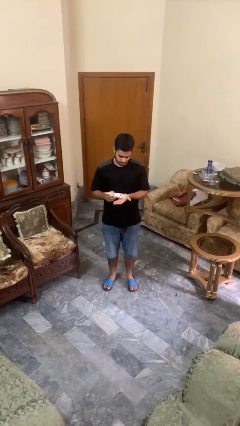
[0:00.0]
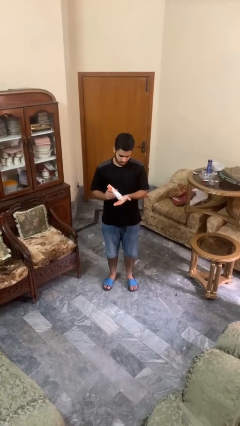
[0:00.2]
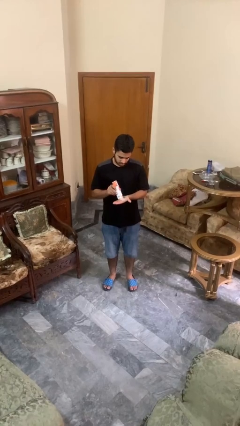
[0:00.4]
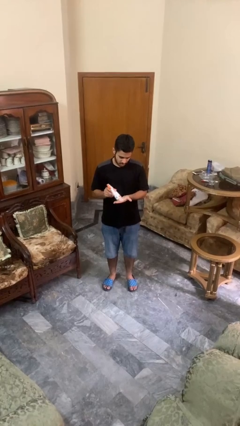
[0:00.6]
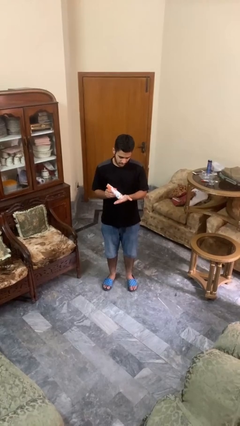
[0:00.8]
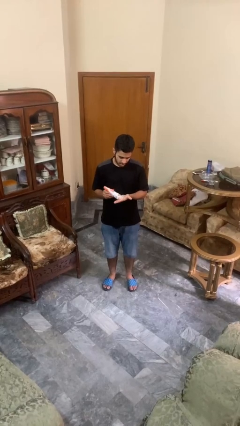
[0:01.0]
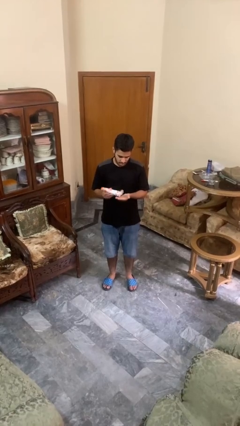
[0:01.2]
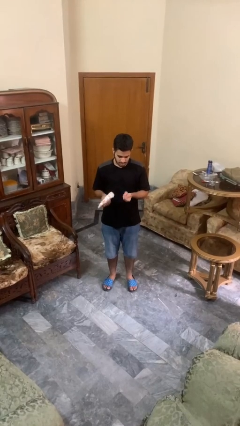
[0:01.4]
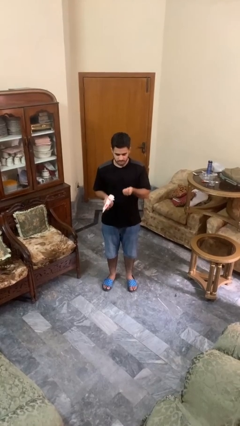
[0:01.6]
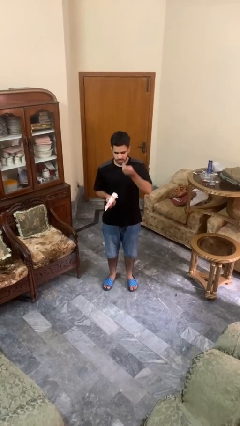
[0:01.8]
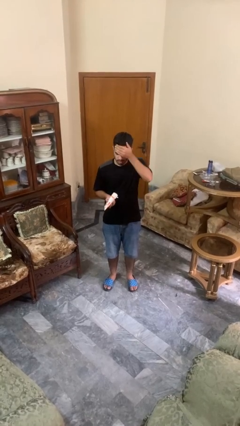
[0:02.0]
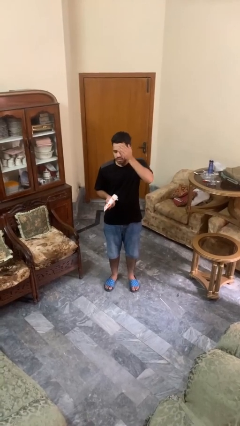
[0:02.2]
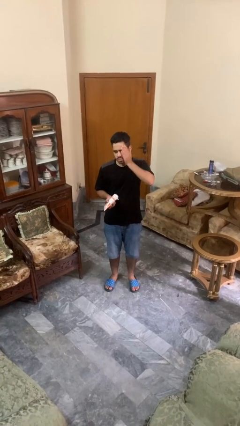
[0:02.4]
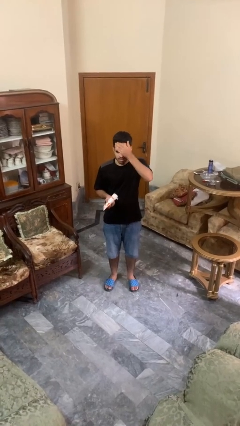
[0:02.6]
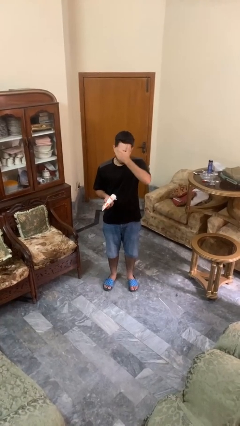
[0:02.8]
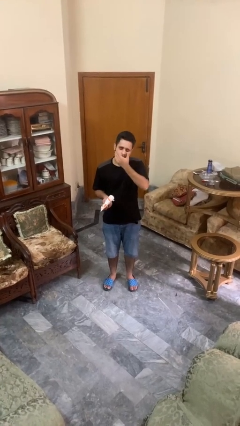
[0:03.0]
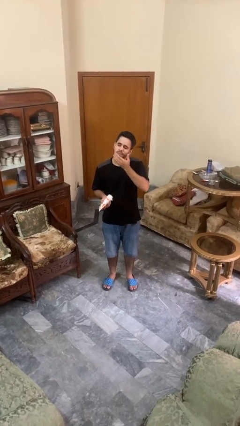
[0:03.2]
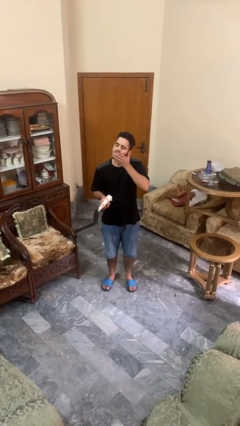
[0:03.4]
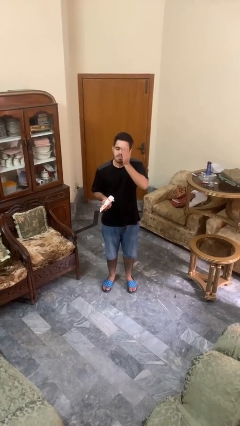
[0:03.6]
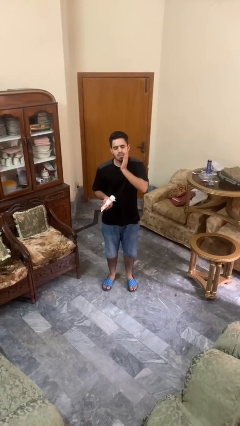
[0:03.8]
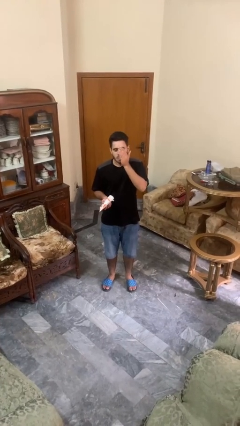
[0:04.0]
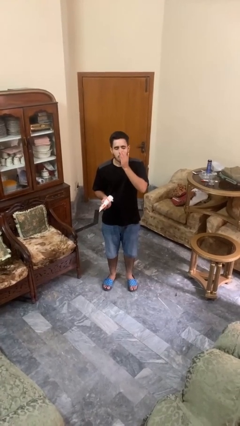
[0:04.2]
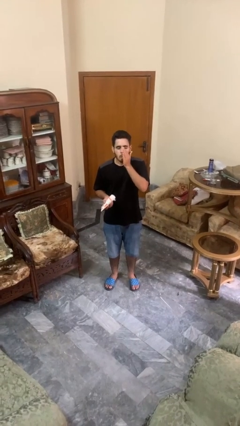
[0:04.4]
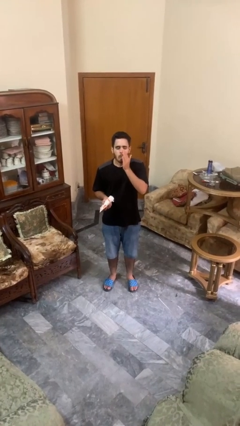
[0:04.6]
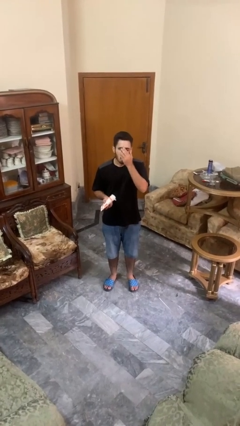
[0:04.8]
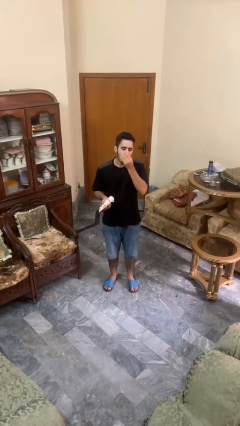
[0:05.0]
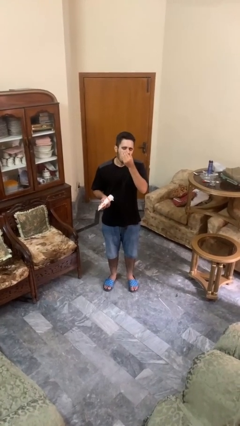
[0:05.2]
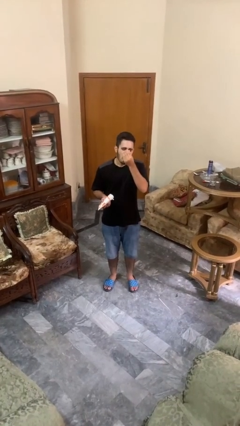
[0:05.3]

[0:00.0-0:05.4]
person applies sunscreen

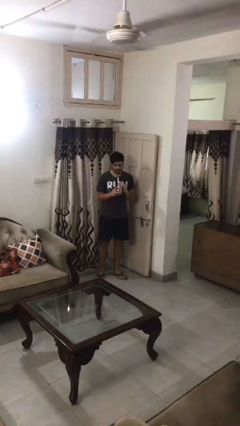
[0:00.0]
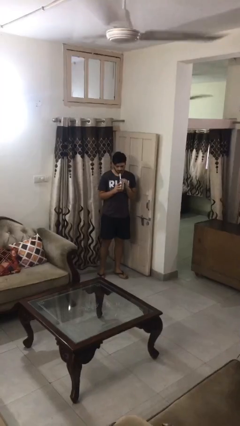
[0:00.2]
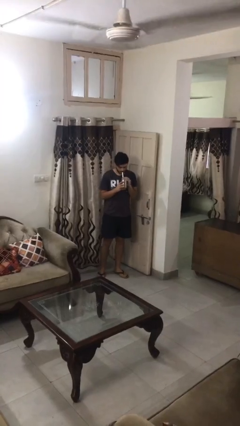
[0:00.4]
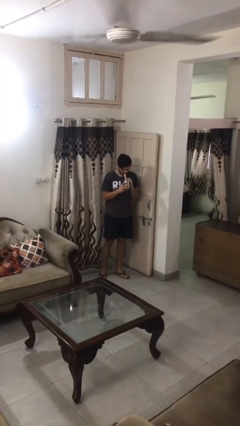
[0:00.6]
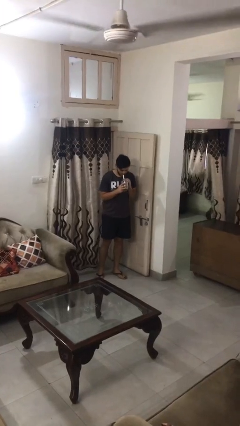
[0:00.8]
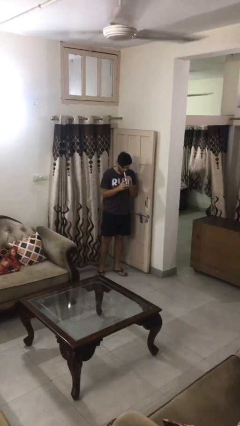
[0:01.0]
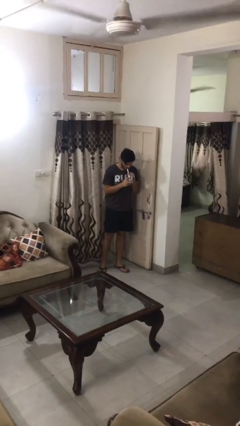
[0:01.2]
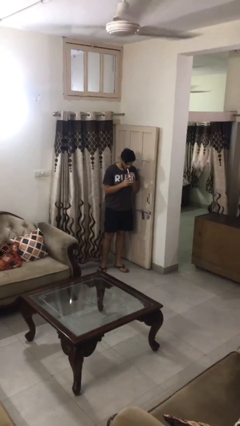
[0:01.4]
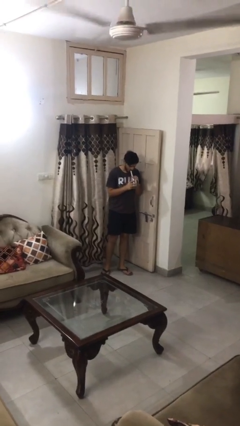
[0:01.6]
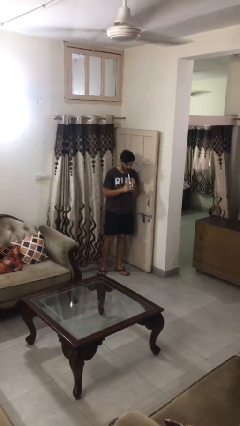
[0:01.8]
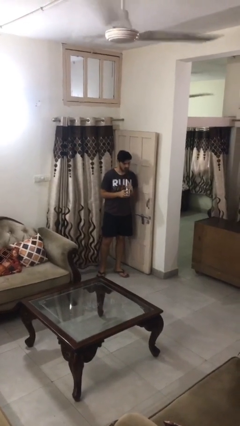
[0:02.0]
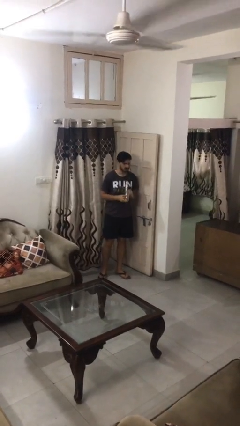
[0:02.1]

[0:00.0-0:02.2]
person drinks from straw

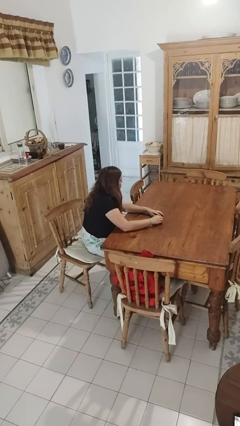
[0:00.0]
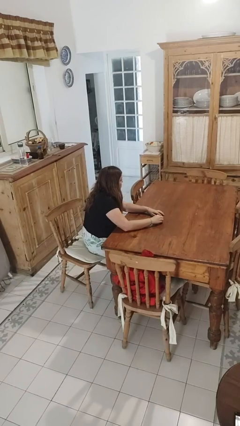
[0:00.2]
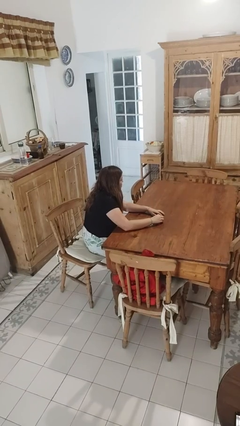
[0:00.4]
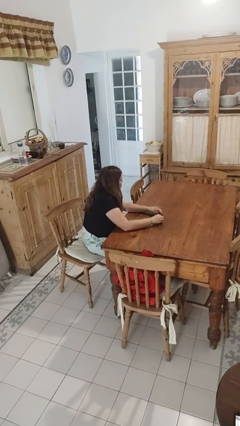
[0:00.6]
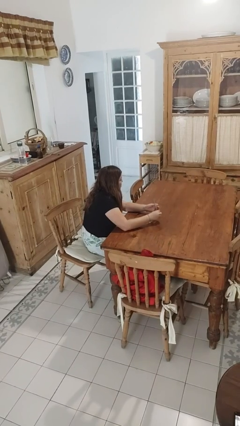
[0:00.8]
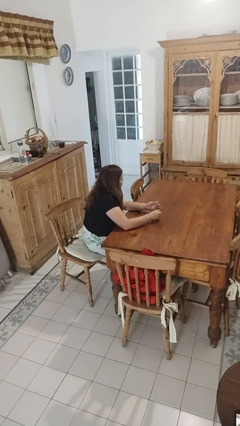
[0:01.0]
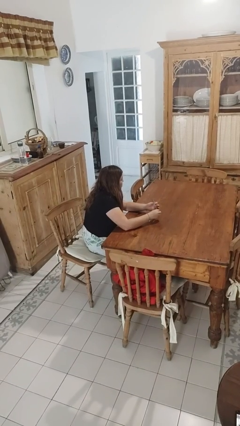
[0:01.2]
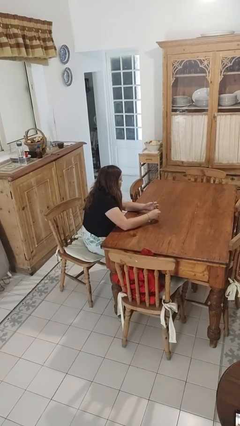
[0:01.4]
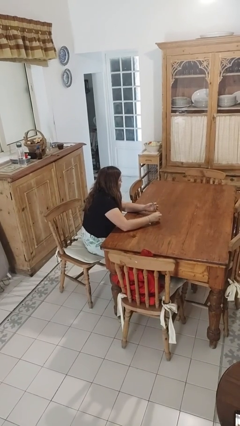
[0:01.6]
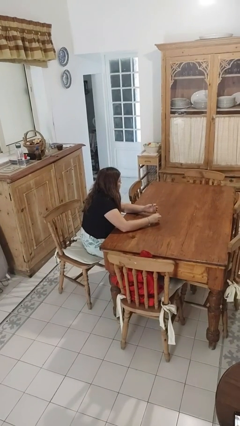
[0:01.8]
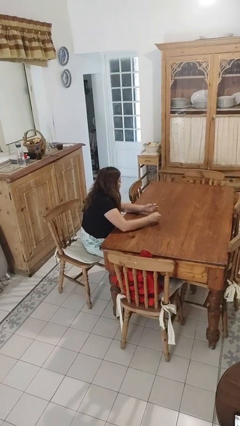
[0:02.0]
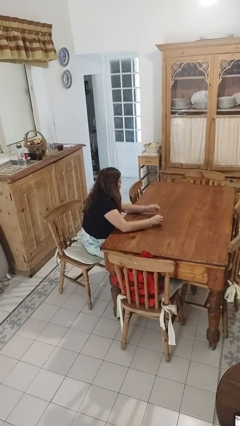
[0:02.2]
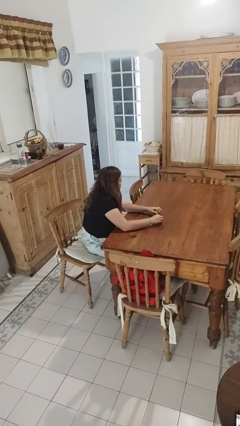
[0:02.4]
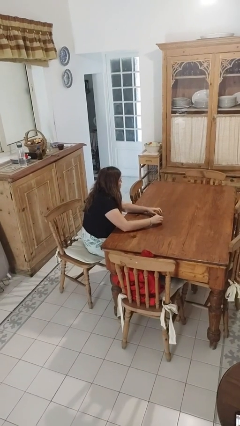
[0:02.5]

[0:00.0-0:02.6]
person files fingernails

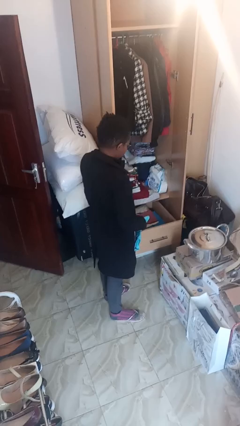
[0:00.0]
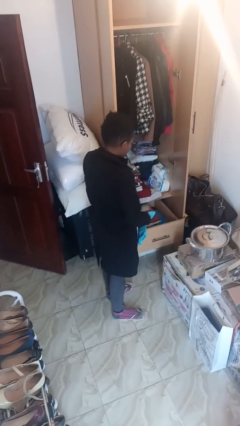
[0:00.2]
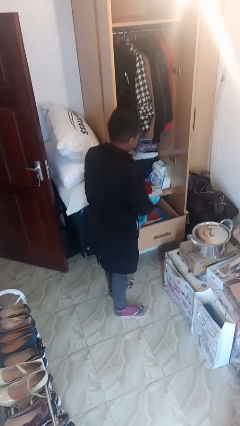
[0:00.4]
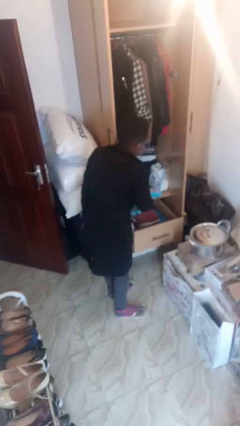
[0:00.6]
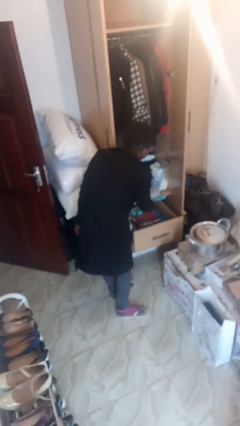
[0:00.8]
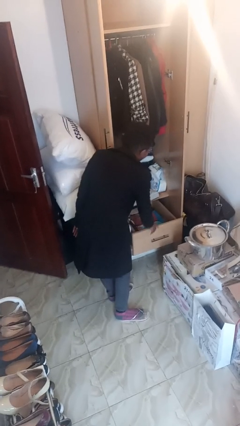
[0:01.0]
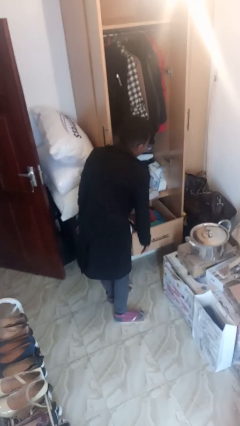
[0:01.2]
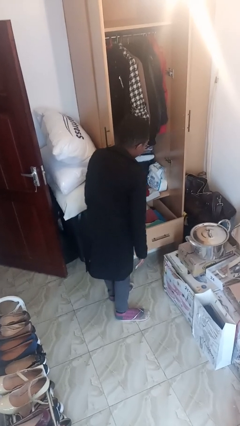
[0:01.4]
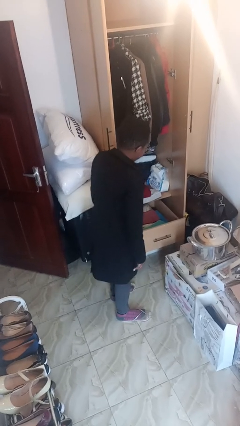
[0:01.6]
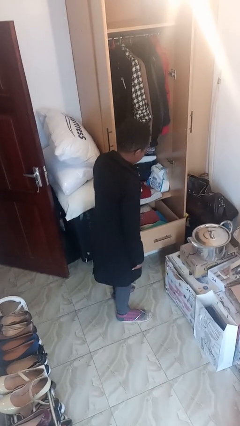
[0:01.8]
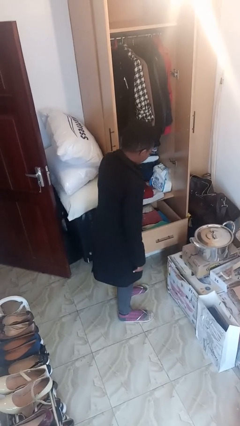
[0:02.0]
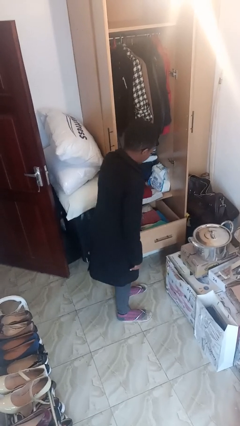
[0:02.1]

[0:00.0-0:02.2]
person puts clothes into dresser

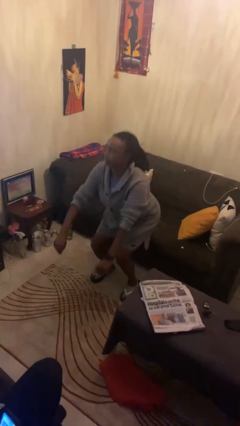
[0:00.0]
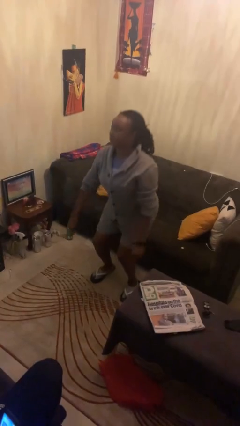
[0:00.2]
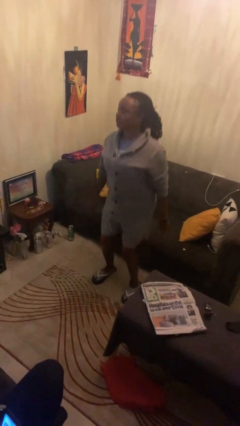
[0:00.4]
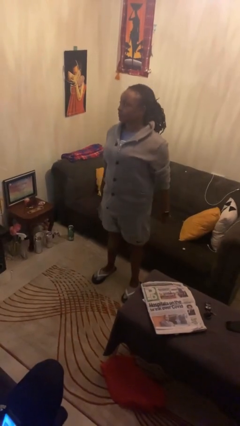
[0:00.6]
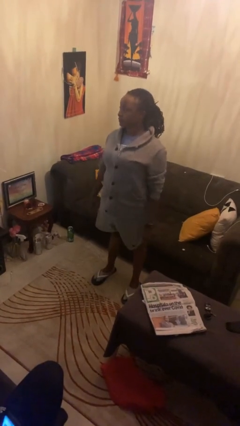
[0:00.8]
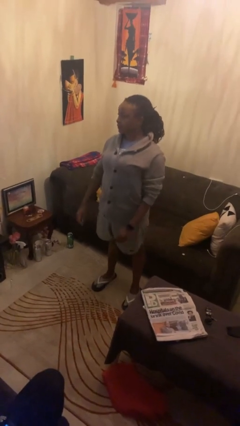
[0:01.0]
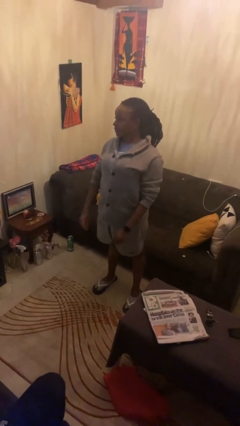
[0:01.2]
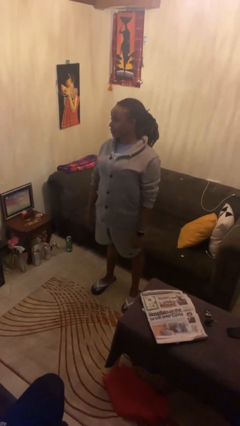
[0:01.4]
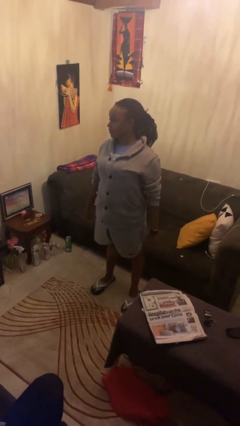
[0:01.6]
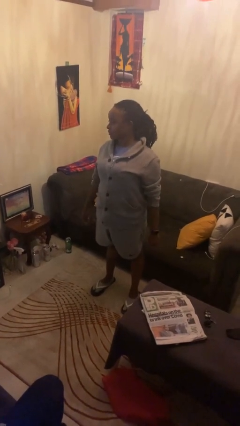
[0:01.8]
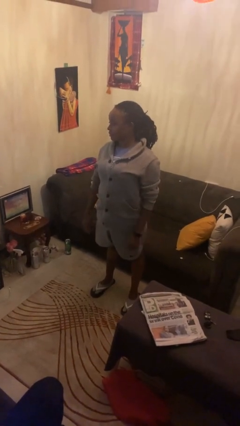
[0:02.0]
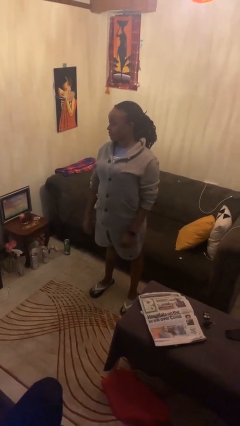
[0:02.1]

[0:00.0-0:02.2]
person stands up

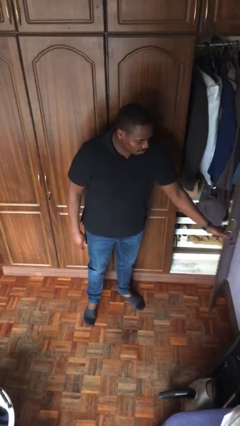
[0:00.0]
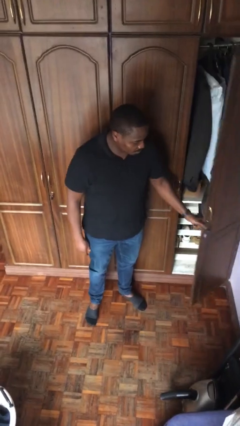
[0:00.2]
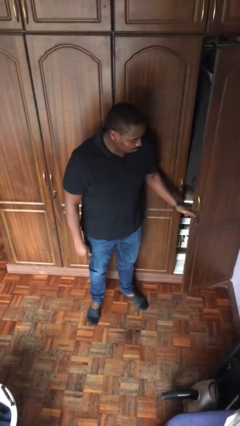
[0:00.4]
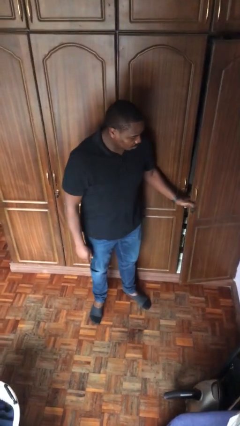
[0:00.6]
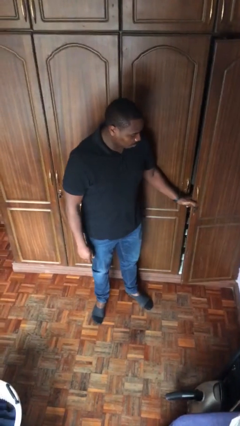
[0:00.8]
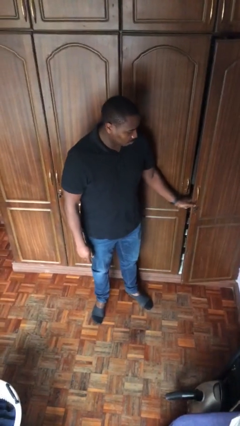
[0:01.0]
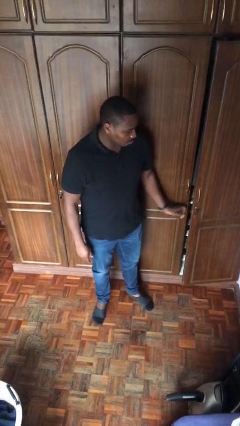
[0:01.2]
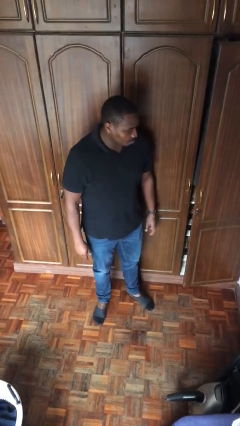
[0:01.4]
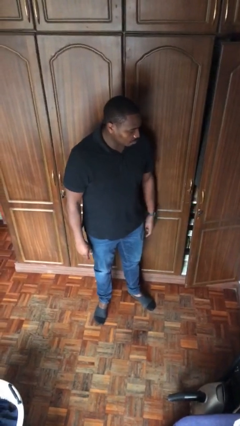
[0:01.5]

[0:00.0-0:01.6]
person closes closet door

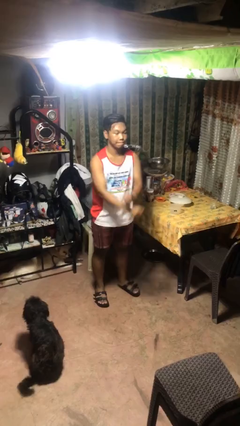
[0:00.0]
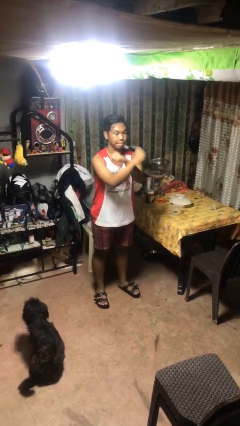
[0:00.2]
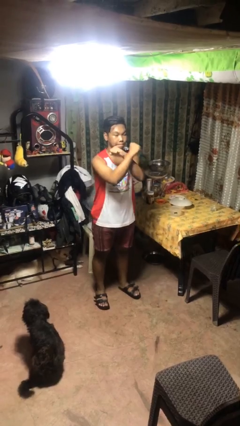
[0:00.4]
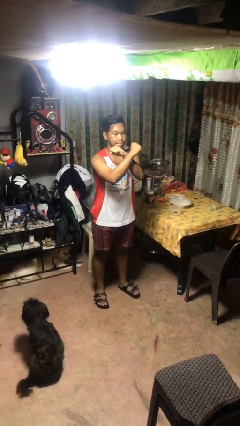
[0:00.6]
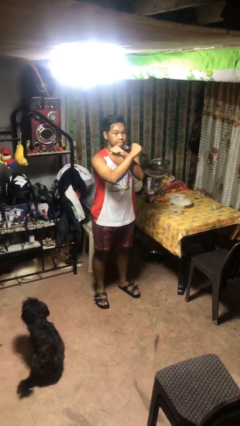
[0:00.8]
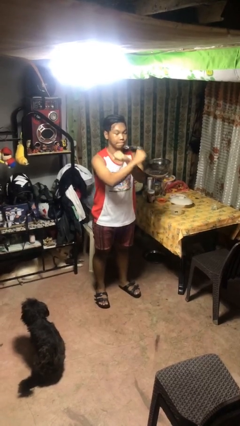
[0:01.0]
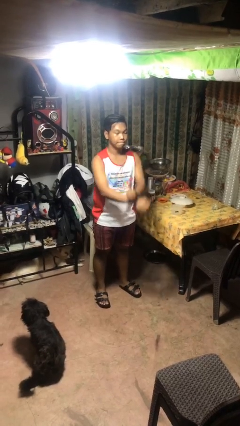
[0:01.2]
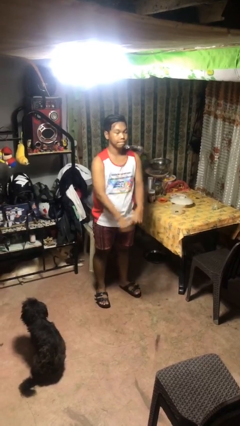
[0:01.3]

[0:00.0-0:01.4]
person gestures arms x
